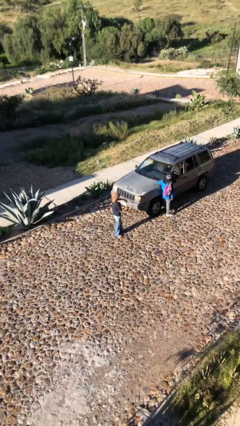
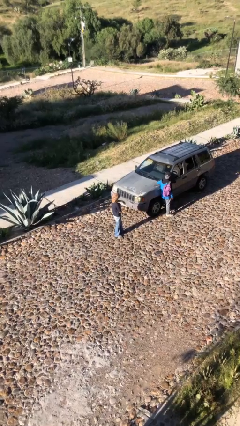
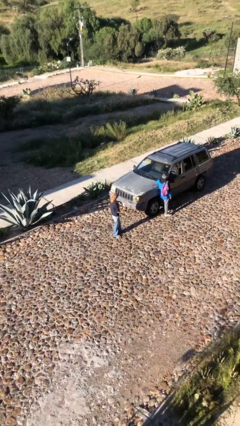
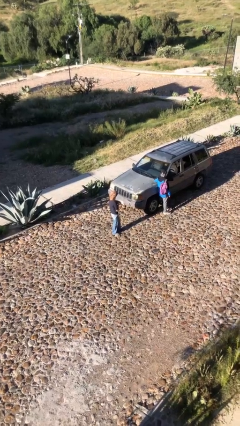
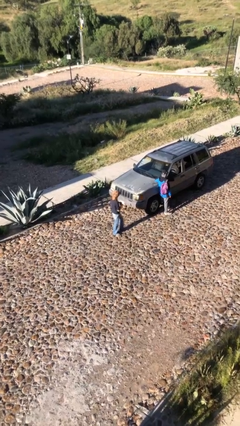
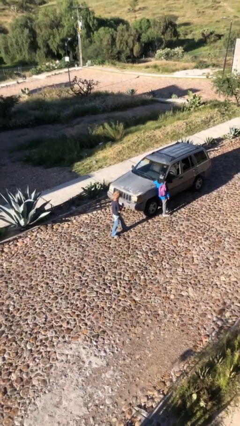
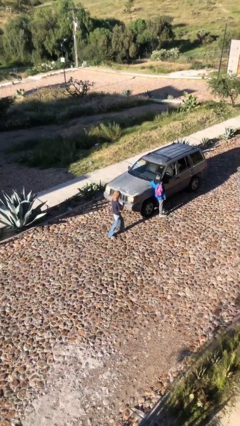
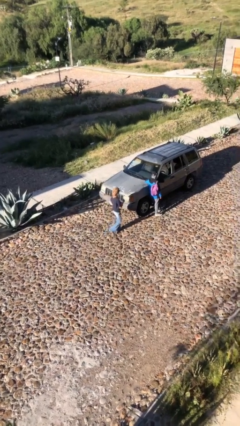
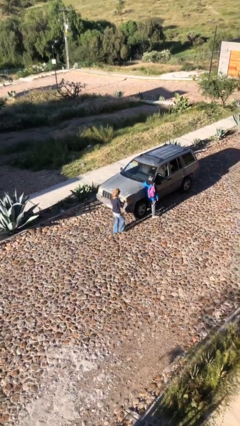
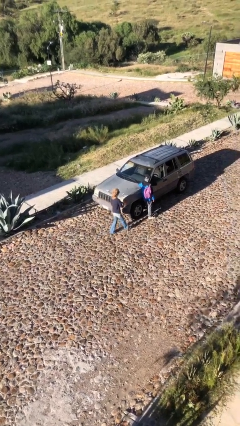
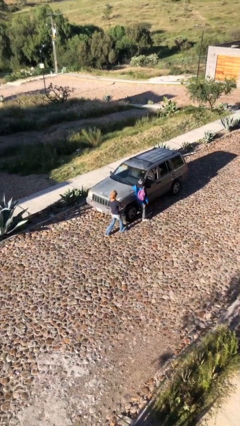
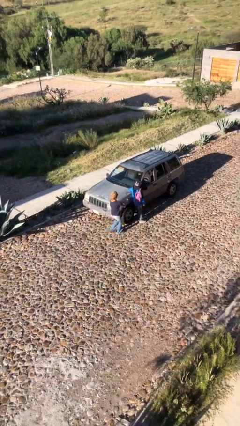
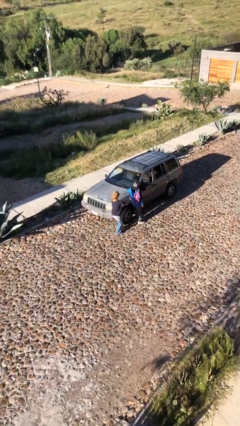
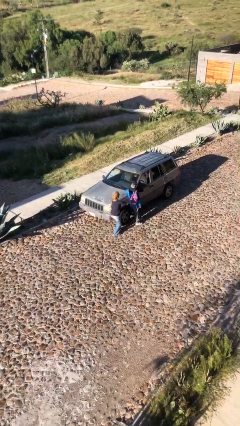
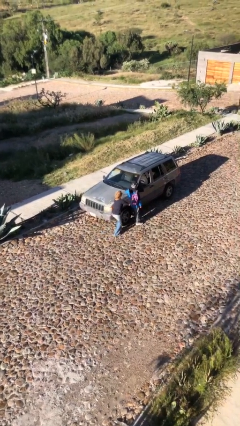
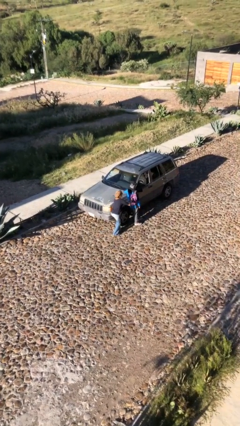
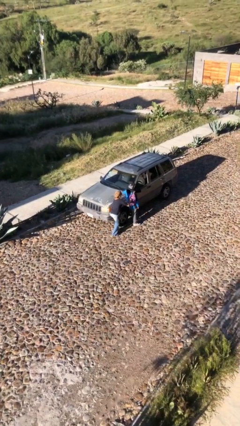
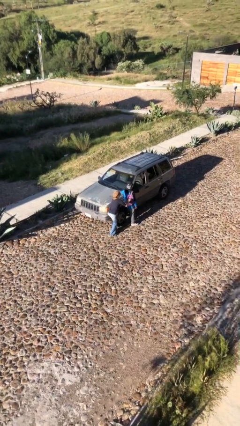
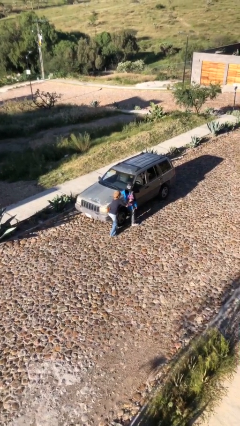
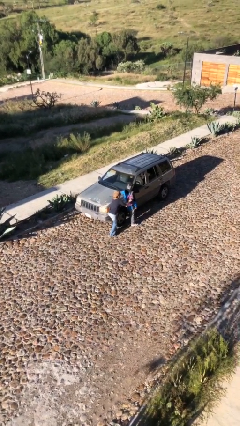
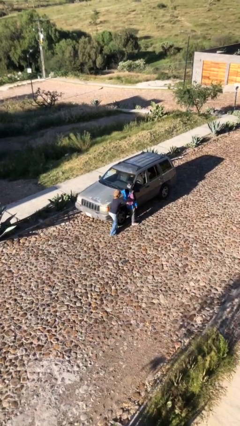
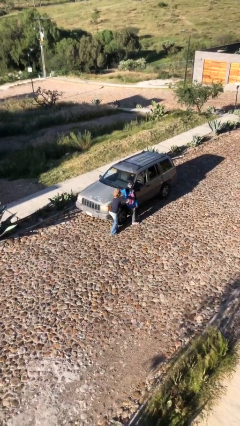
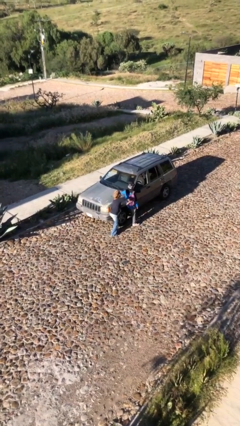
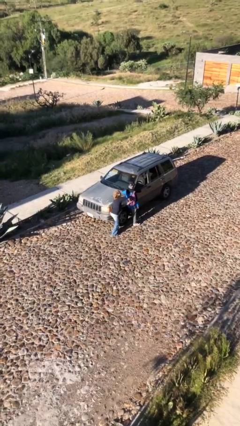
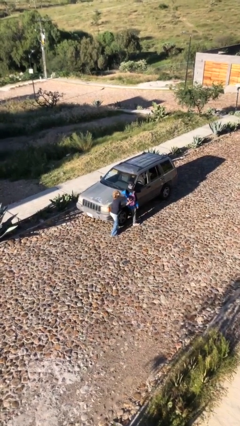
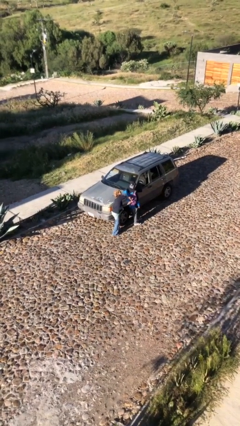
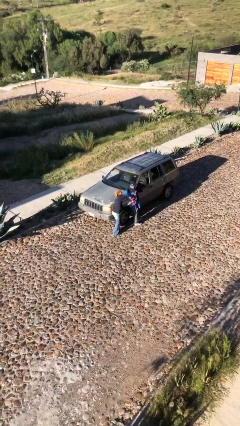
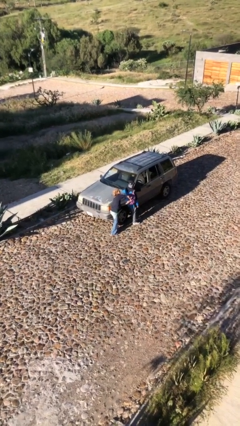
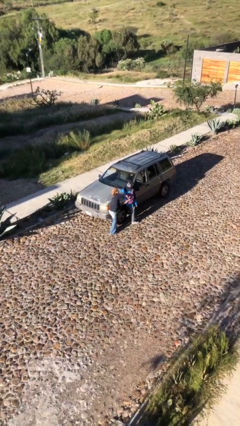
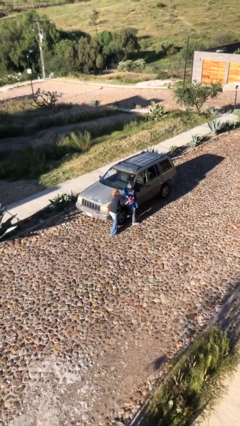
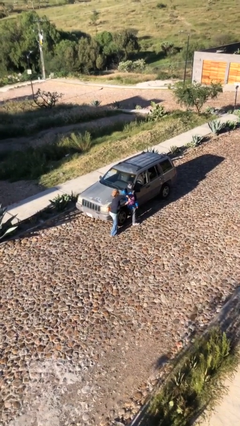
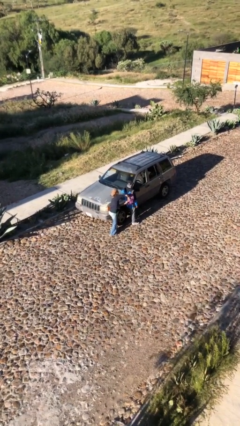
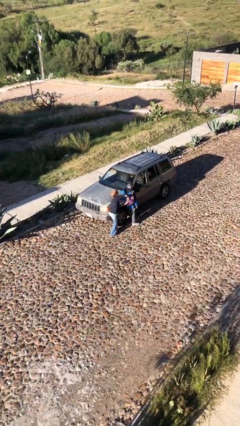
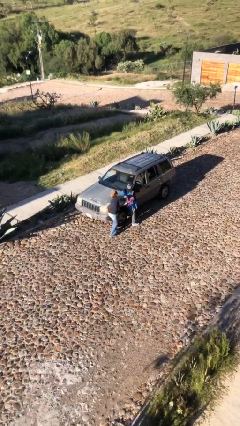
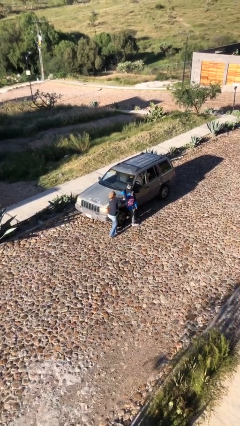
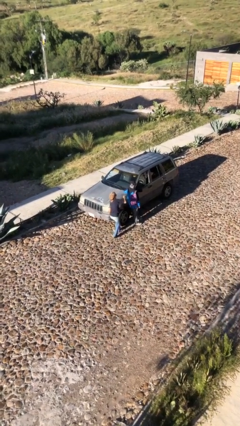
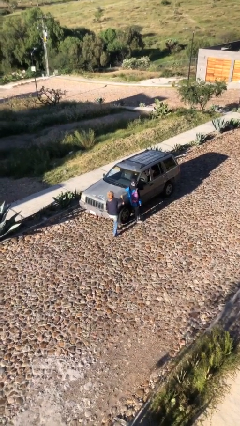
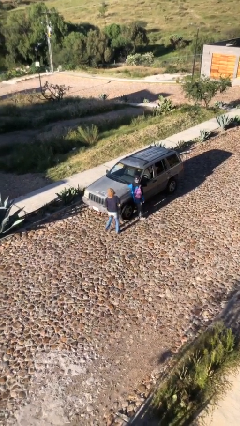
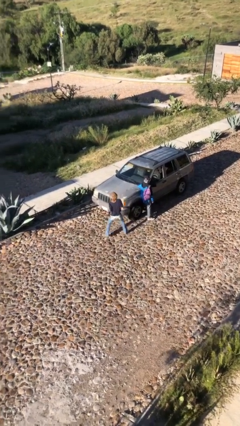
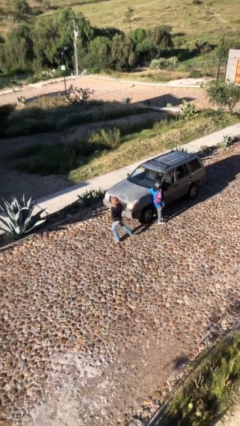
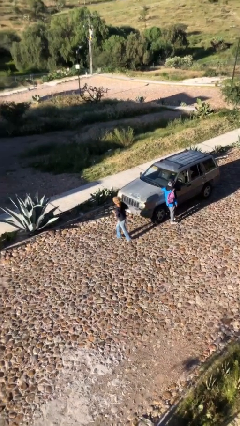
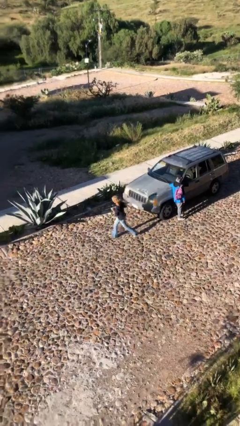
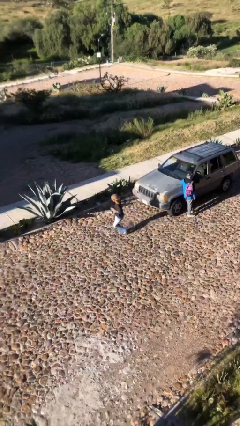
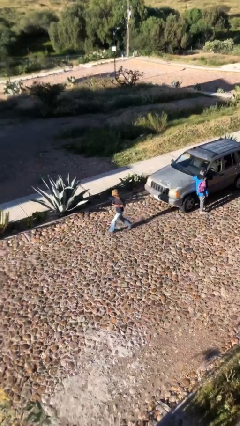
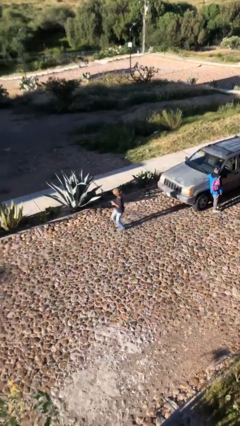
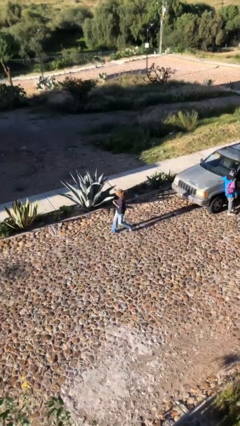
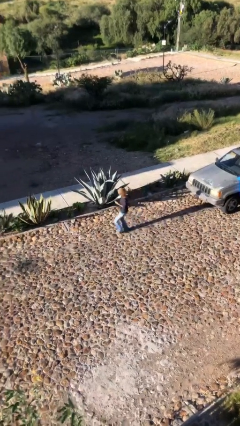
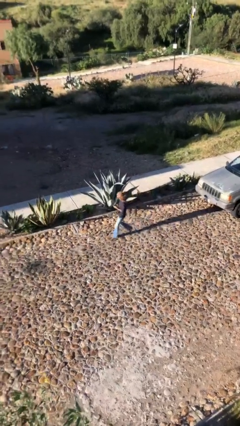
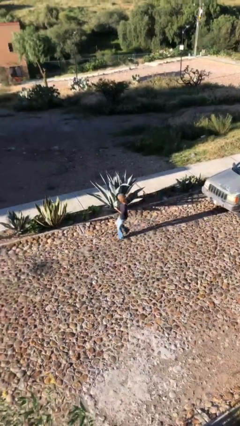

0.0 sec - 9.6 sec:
person steals object from person

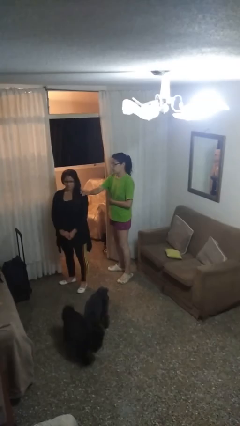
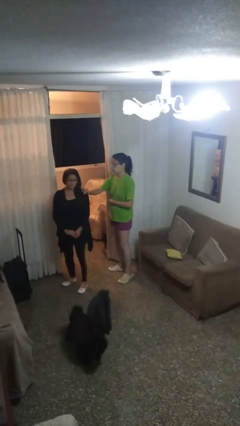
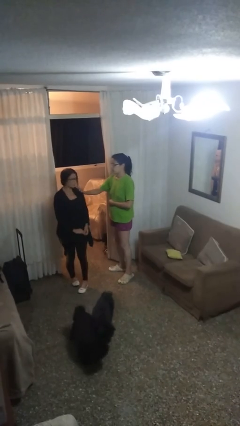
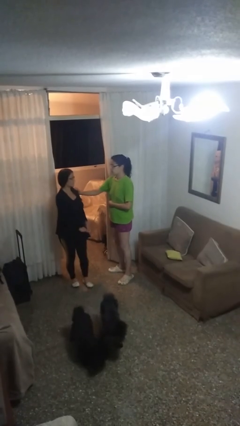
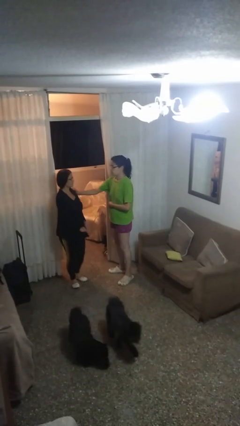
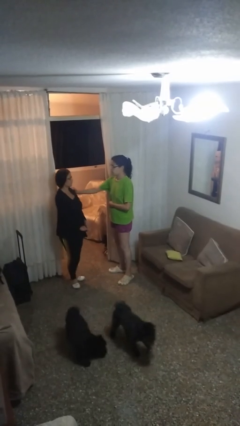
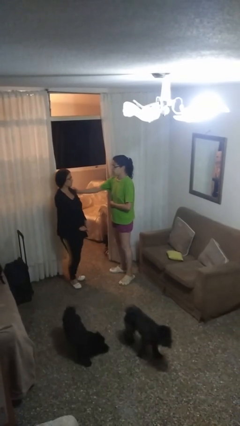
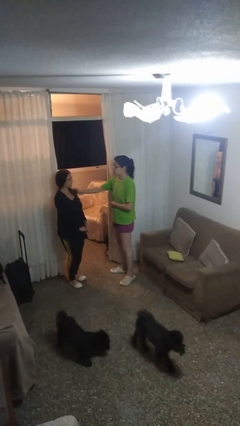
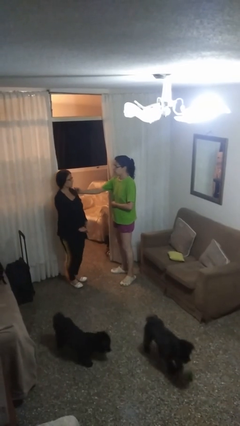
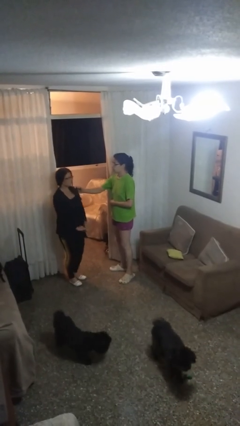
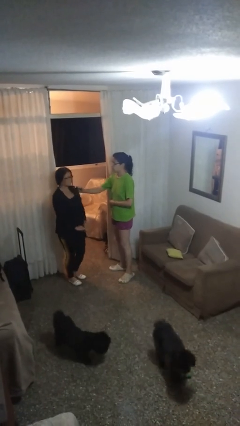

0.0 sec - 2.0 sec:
person spins person around

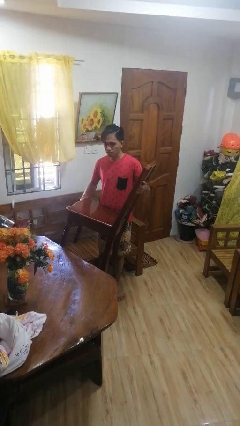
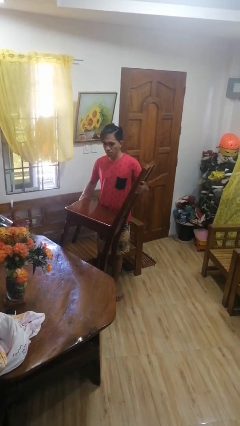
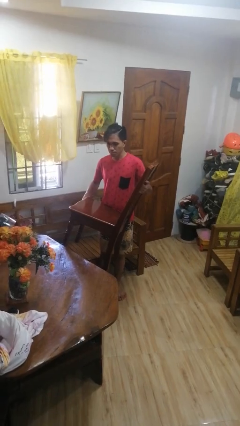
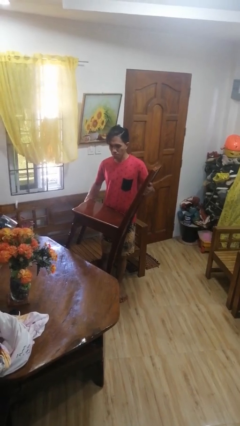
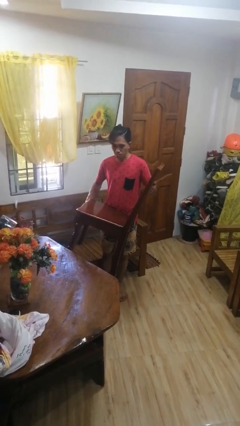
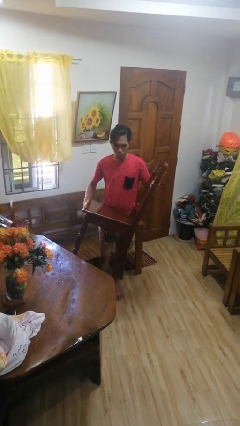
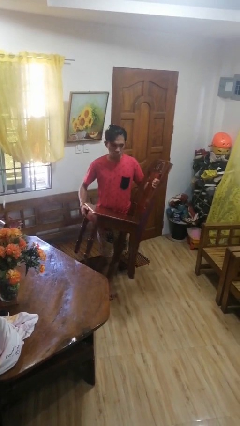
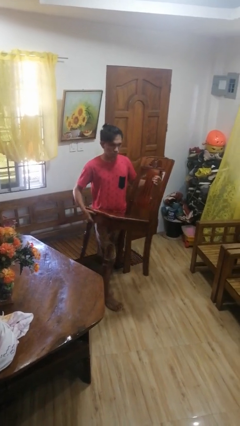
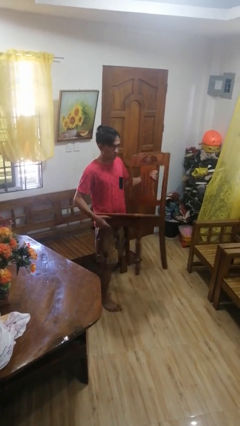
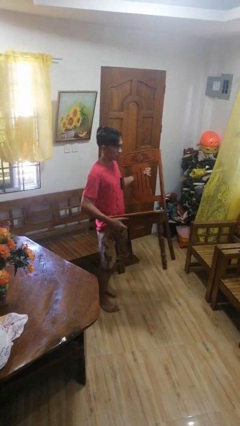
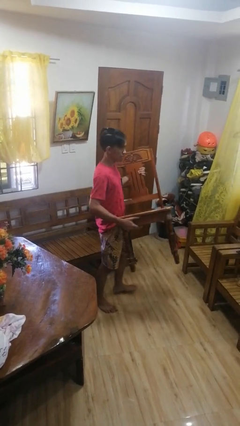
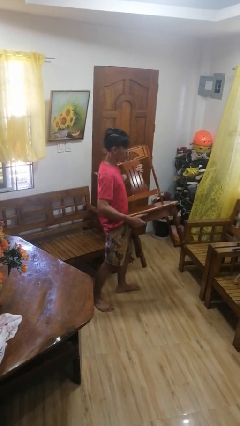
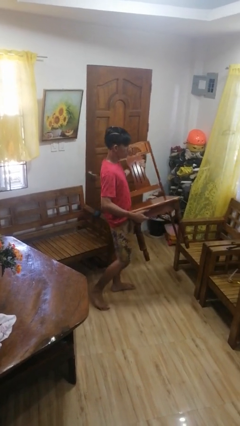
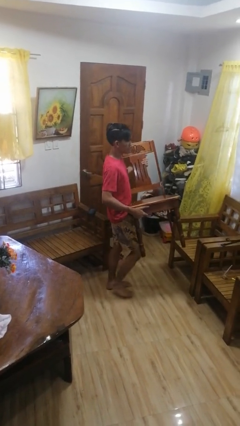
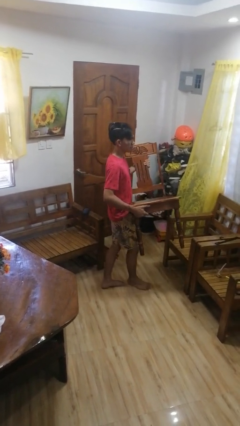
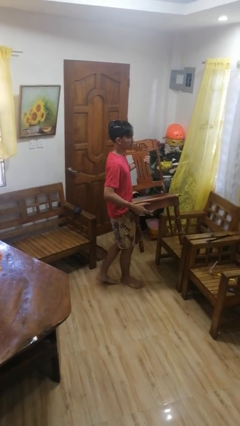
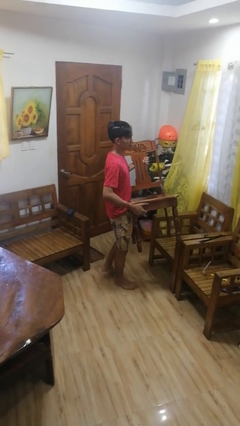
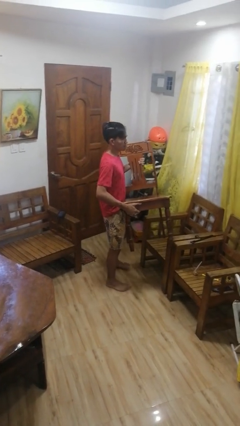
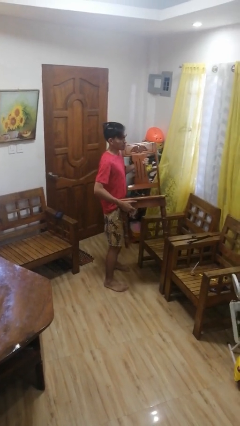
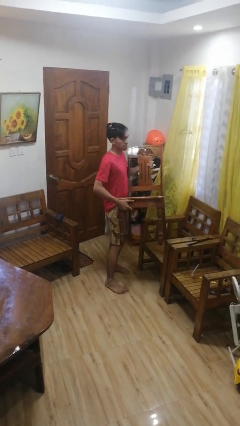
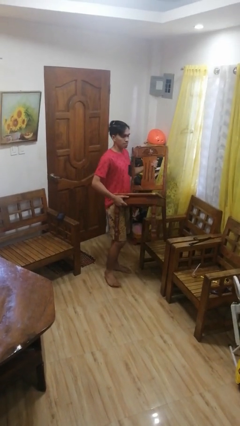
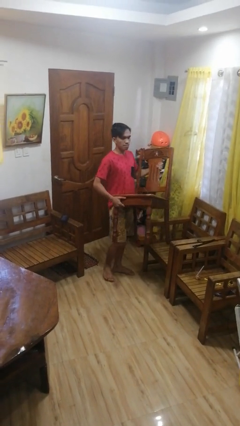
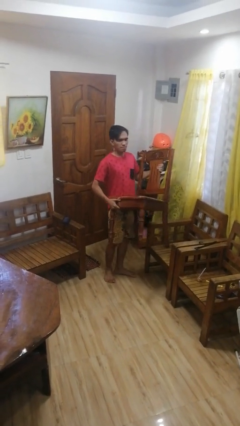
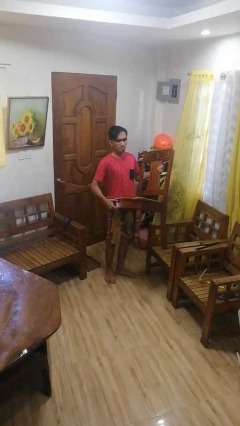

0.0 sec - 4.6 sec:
person carries furniture

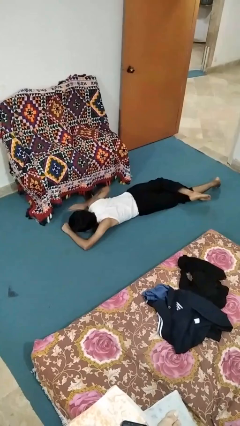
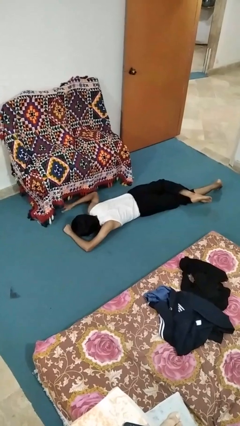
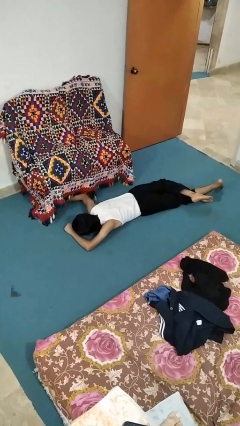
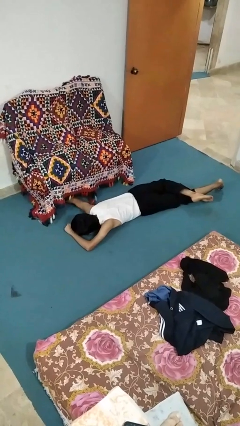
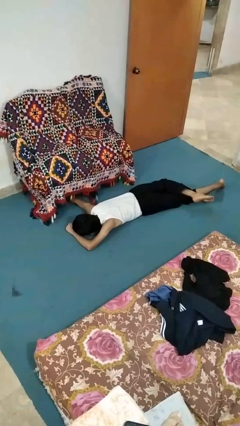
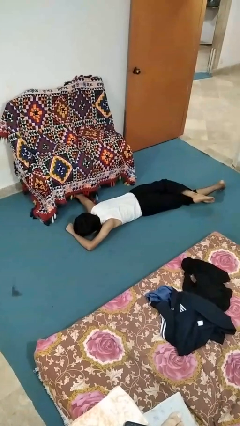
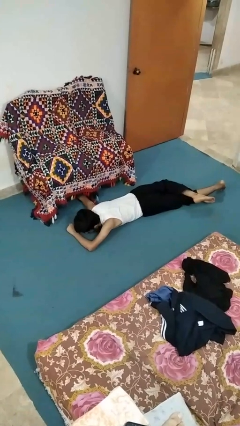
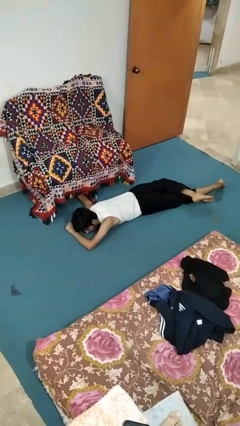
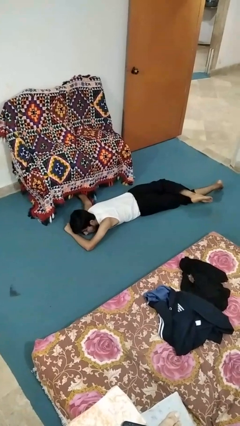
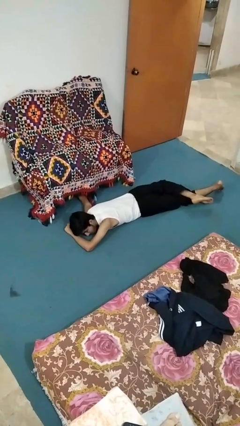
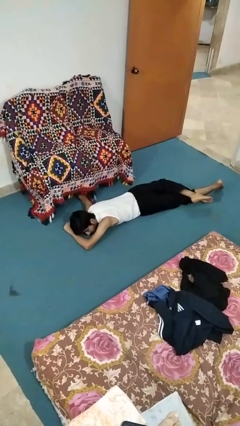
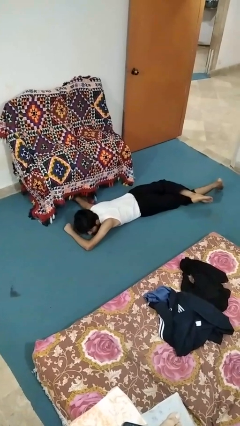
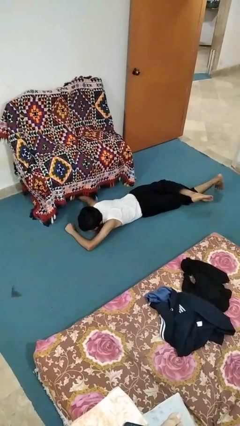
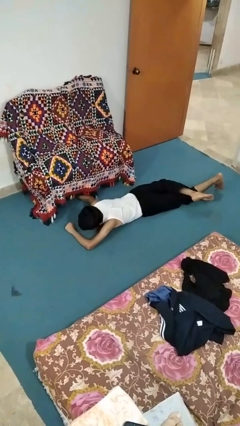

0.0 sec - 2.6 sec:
person searches under couch
